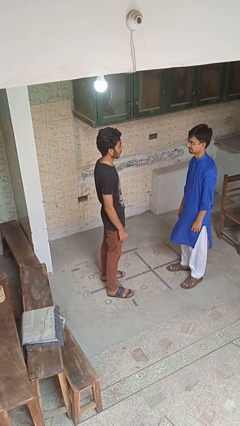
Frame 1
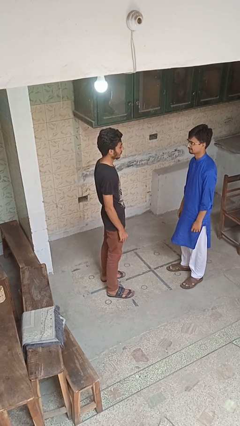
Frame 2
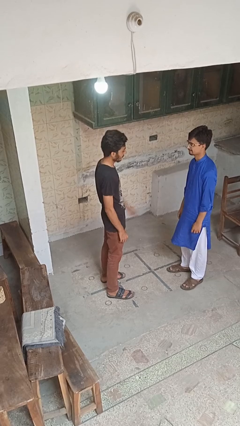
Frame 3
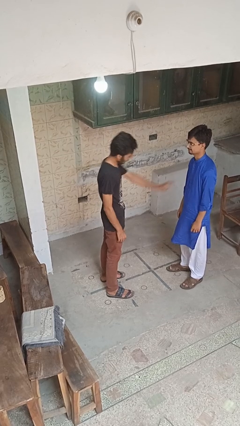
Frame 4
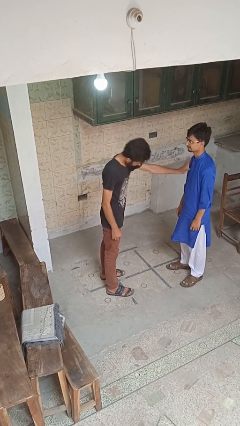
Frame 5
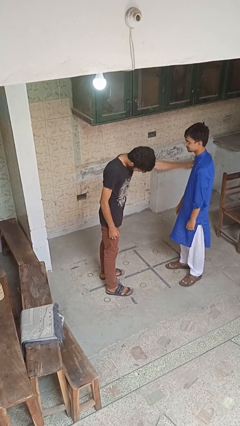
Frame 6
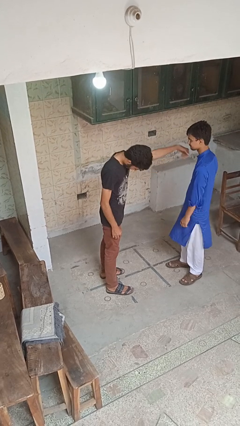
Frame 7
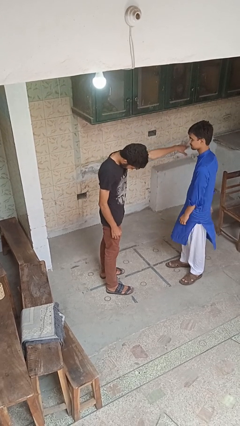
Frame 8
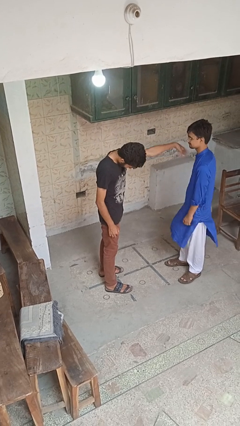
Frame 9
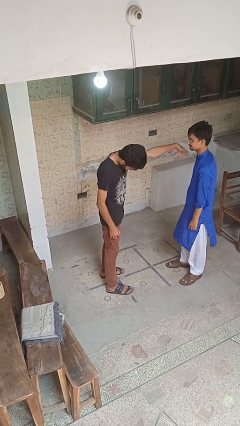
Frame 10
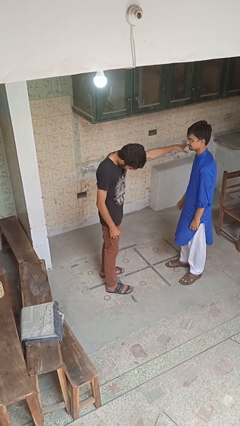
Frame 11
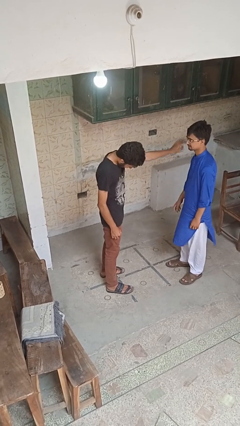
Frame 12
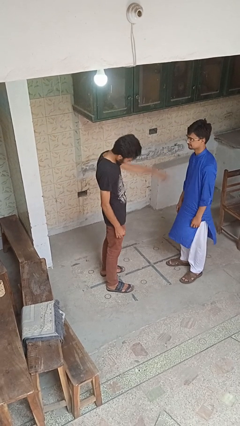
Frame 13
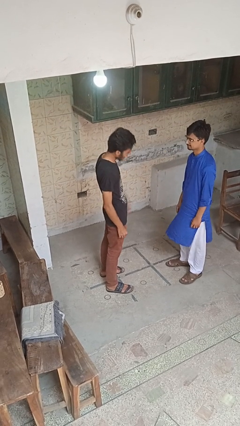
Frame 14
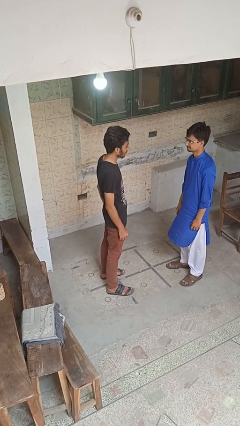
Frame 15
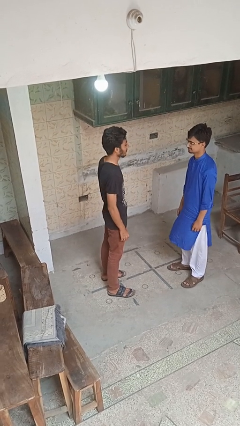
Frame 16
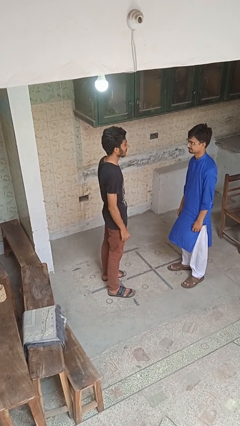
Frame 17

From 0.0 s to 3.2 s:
person shoves person

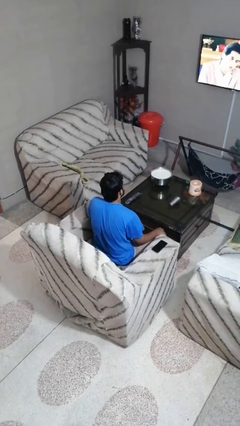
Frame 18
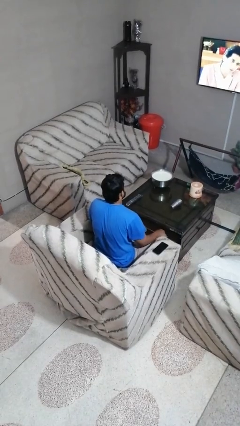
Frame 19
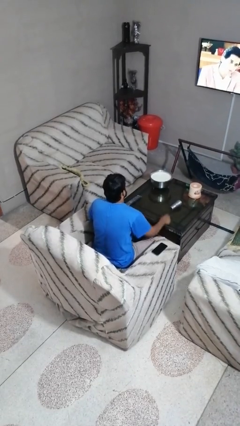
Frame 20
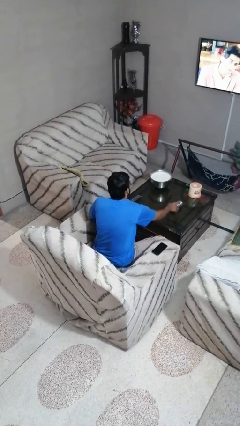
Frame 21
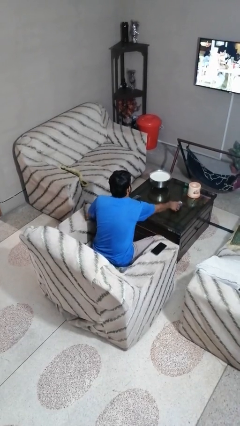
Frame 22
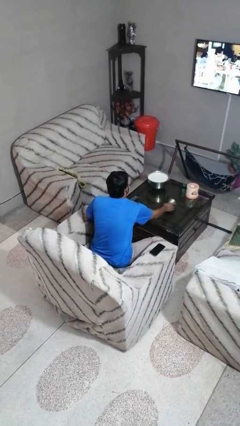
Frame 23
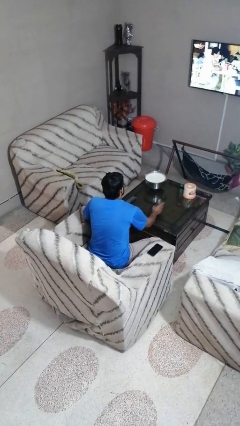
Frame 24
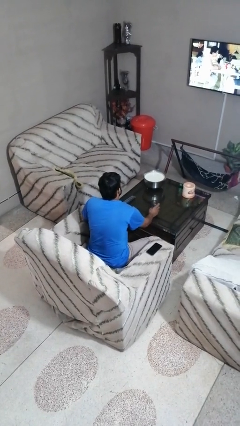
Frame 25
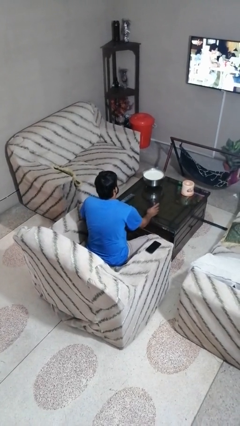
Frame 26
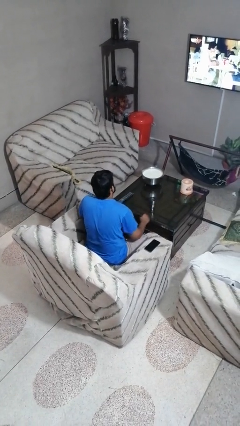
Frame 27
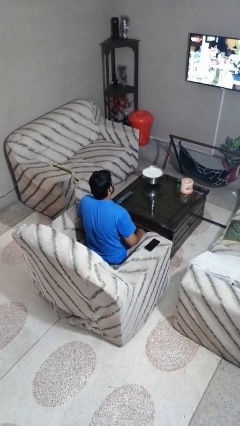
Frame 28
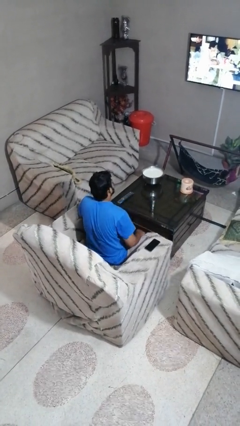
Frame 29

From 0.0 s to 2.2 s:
person sets upright glass

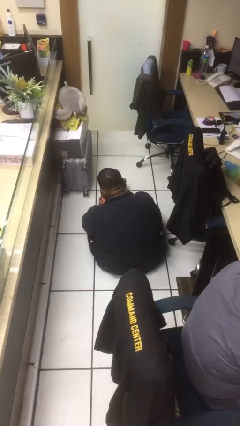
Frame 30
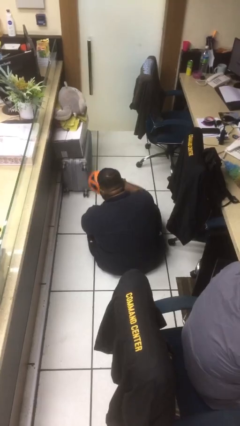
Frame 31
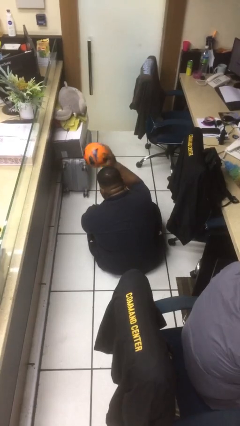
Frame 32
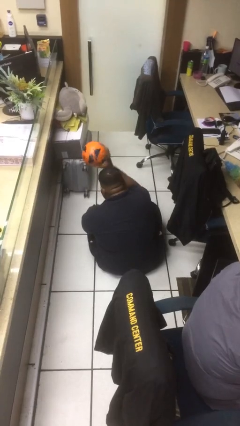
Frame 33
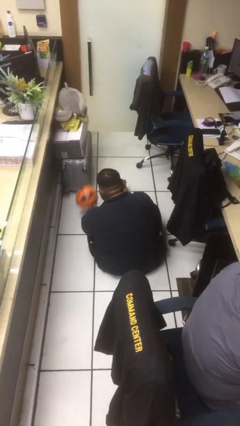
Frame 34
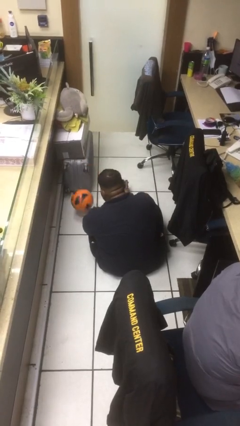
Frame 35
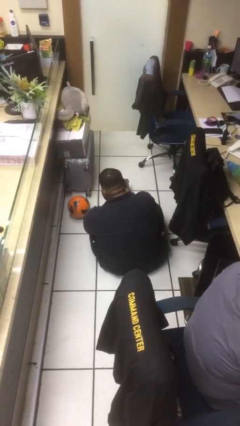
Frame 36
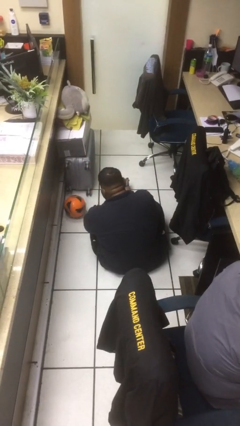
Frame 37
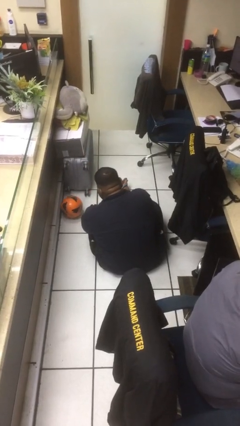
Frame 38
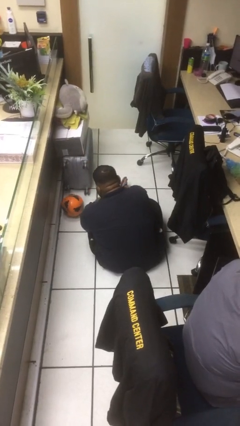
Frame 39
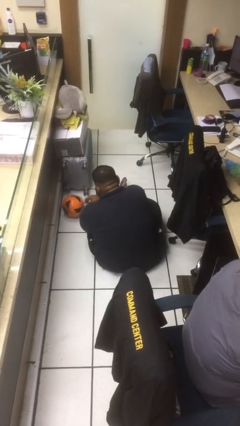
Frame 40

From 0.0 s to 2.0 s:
person bounces ball on floor

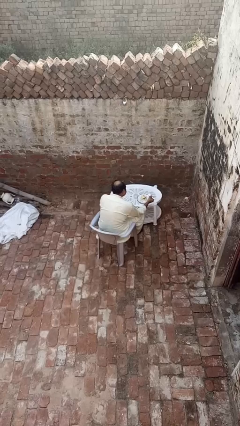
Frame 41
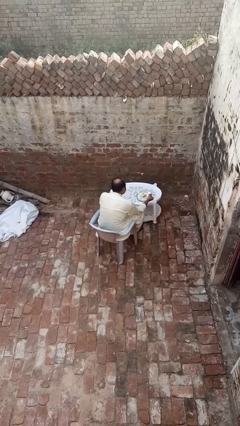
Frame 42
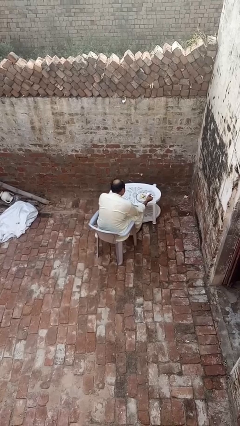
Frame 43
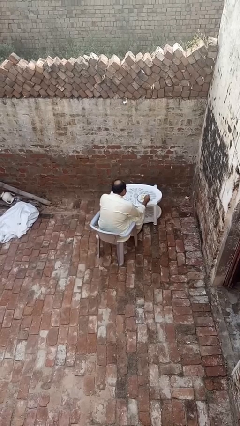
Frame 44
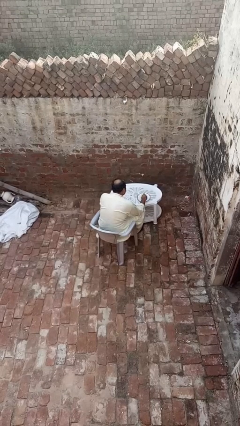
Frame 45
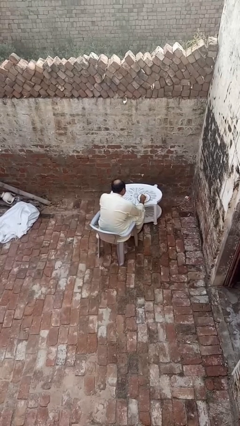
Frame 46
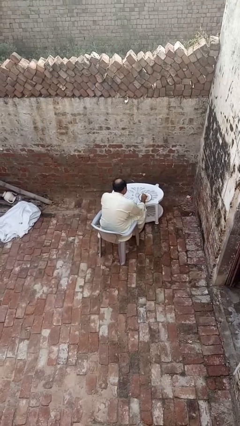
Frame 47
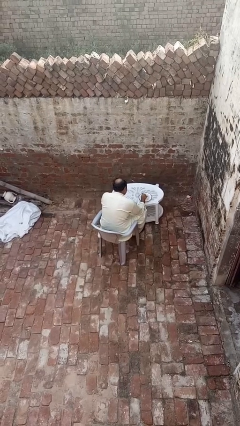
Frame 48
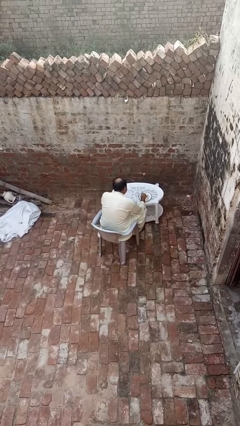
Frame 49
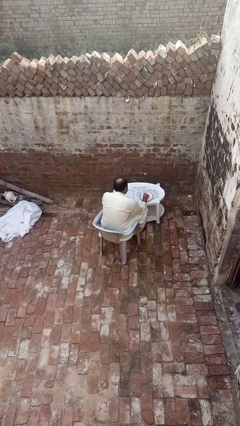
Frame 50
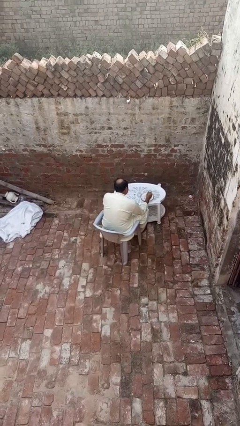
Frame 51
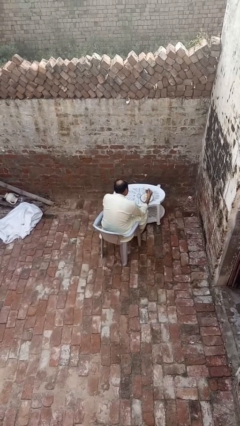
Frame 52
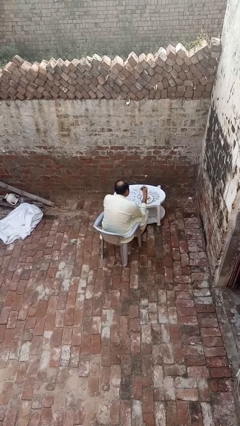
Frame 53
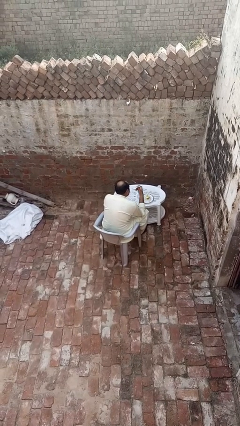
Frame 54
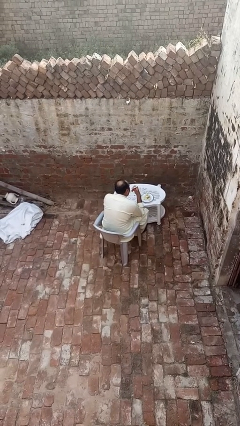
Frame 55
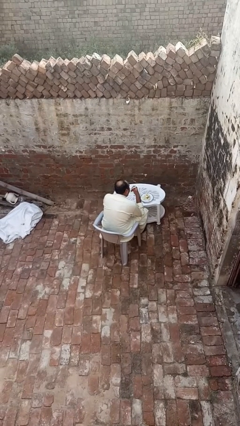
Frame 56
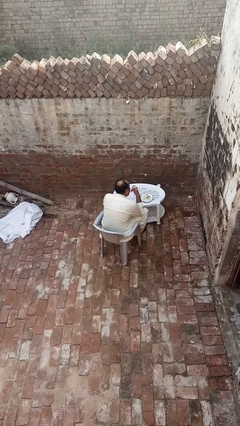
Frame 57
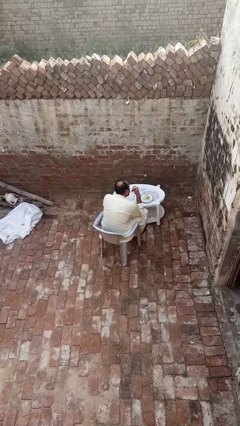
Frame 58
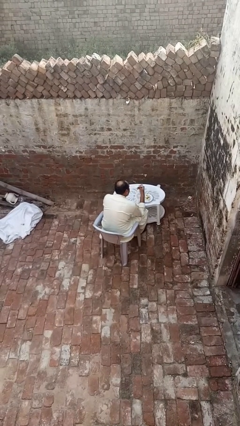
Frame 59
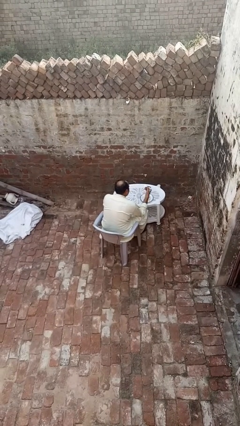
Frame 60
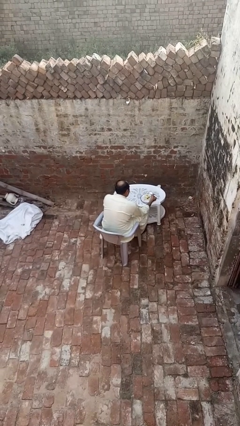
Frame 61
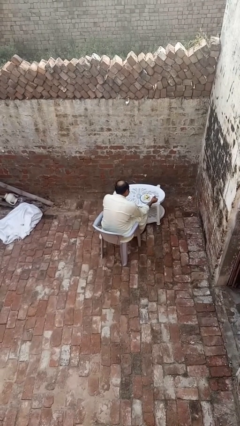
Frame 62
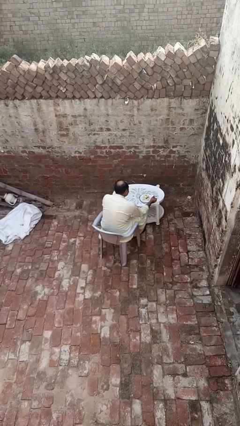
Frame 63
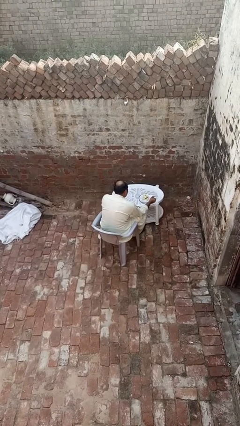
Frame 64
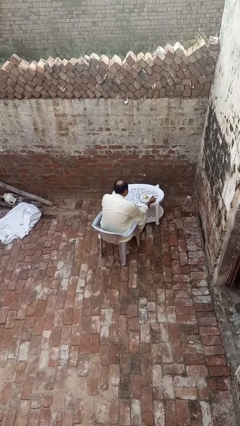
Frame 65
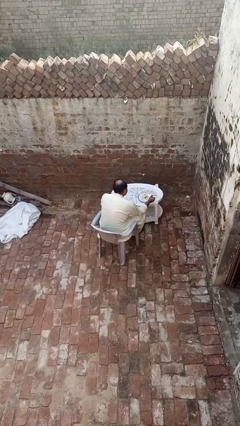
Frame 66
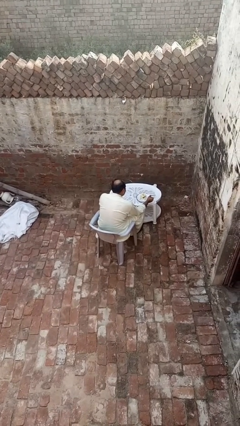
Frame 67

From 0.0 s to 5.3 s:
person eats with utensil

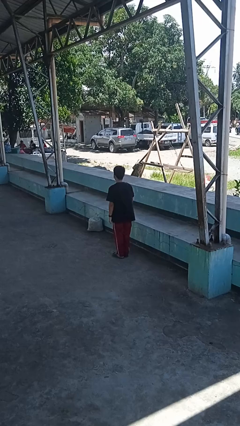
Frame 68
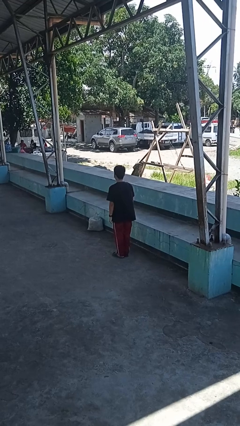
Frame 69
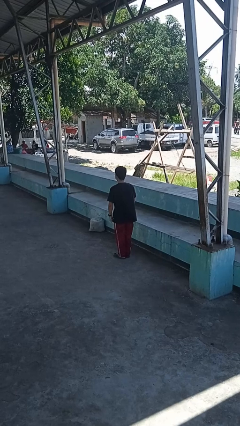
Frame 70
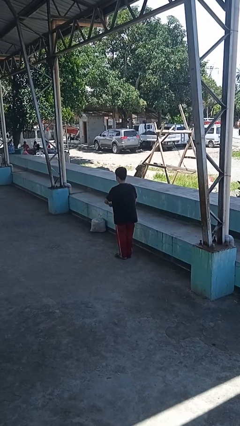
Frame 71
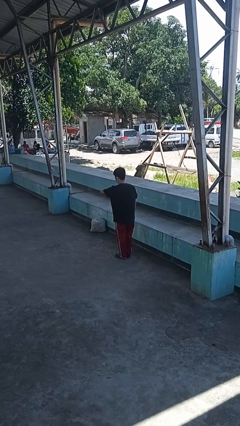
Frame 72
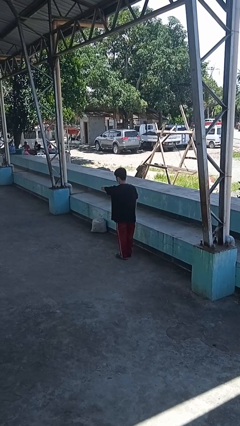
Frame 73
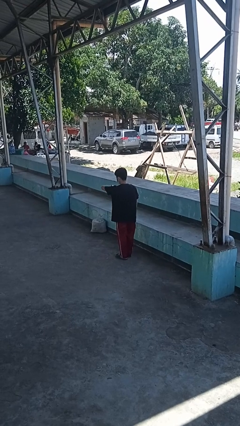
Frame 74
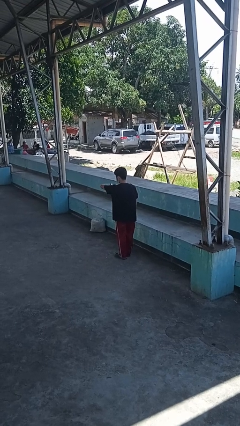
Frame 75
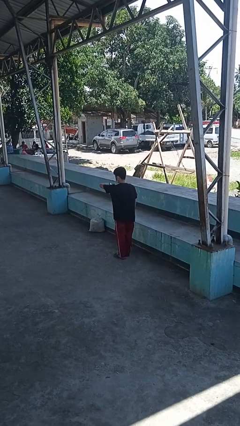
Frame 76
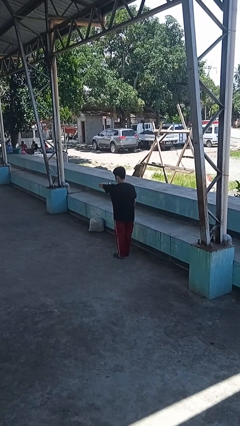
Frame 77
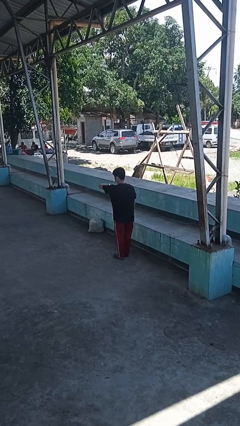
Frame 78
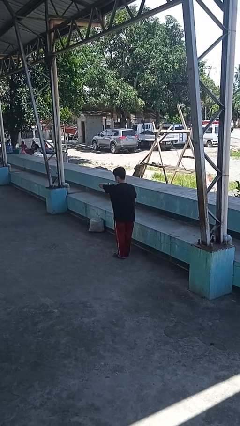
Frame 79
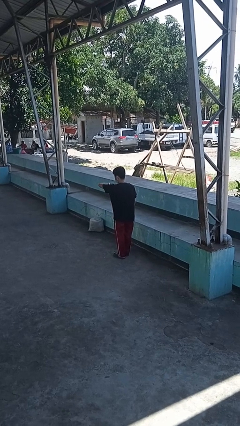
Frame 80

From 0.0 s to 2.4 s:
person looks at wristwatch

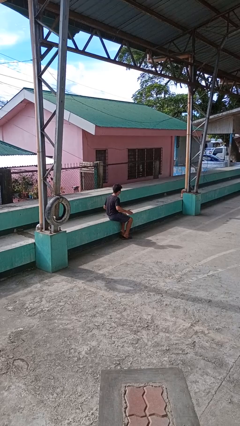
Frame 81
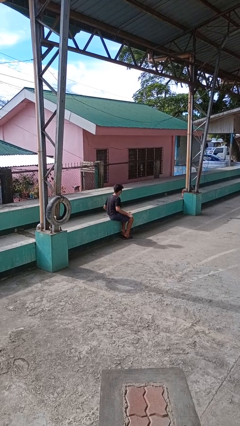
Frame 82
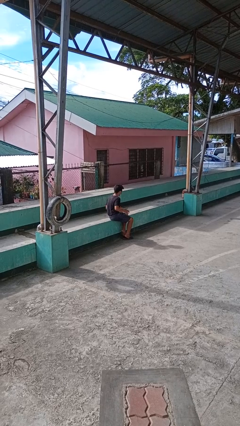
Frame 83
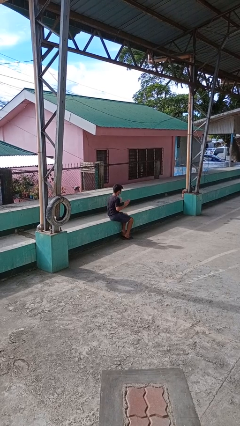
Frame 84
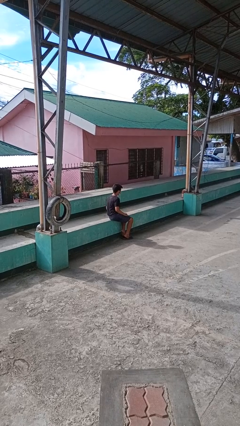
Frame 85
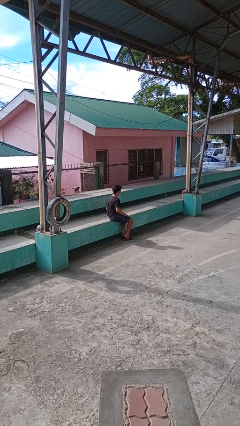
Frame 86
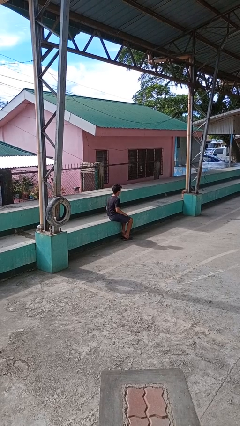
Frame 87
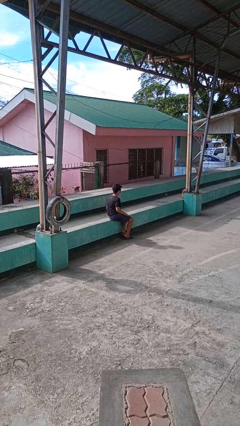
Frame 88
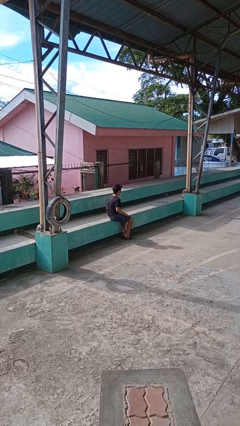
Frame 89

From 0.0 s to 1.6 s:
person slaps hands on thighs

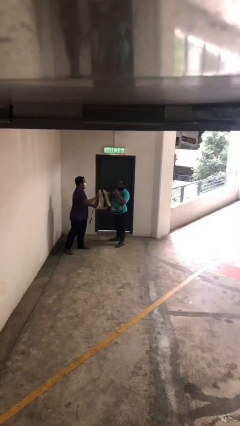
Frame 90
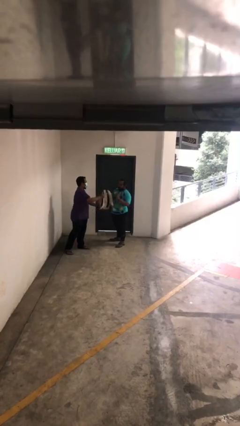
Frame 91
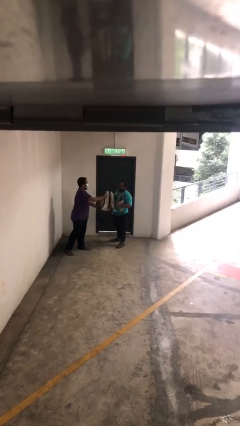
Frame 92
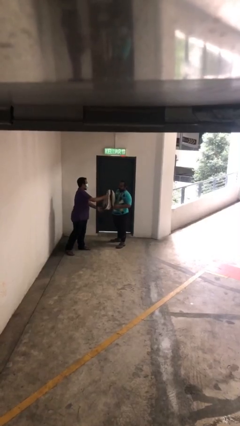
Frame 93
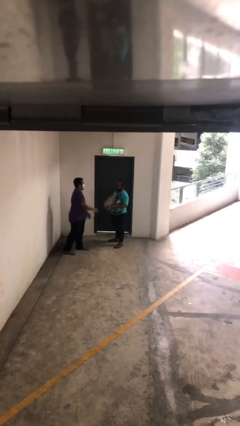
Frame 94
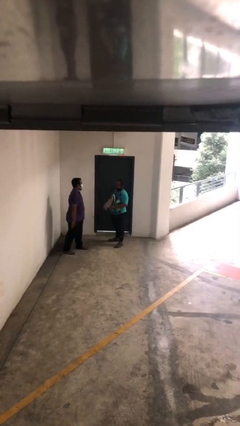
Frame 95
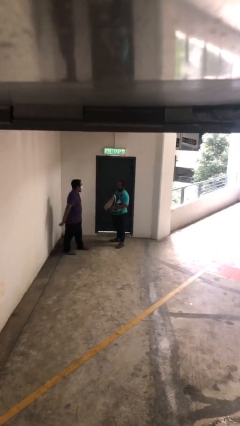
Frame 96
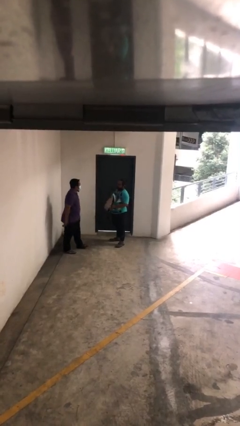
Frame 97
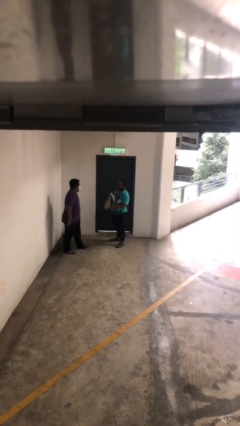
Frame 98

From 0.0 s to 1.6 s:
person transfers object to person
